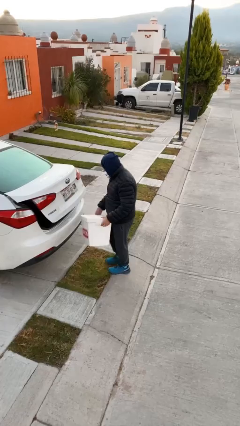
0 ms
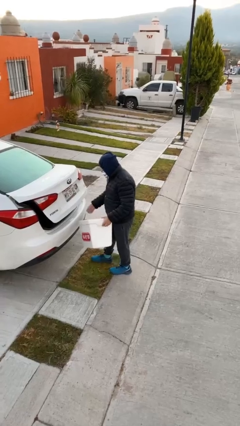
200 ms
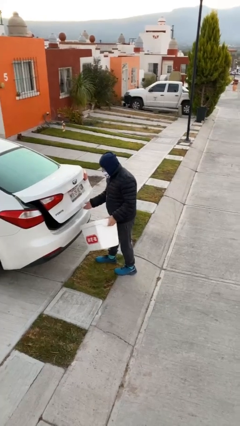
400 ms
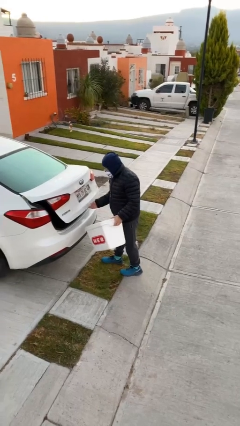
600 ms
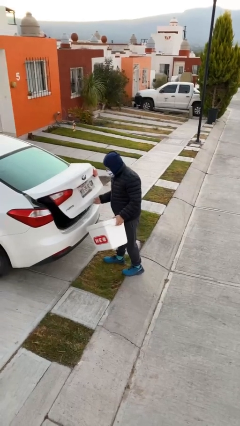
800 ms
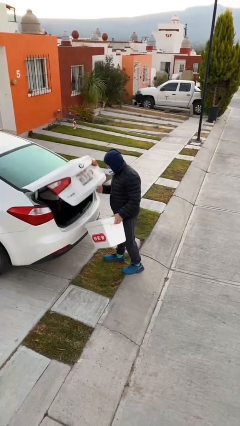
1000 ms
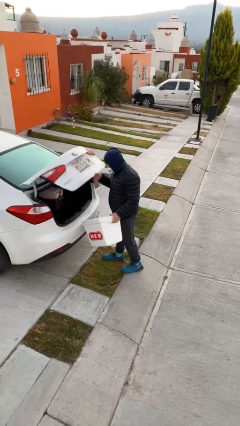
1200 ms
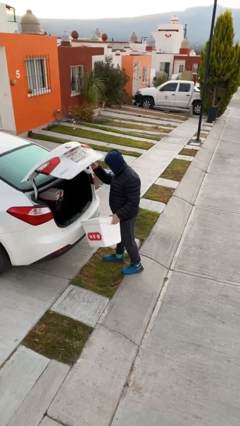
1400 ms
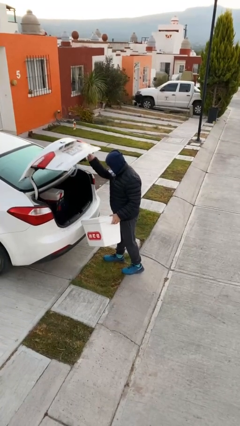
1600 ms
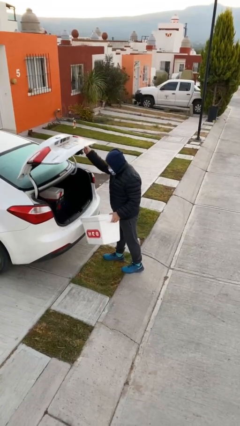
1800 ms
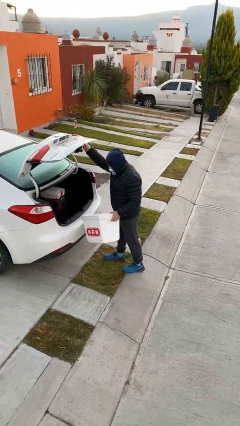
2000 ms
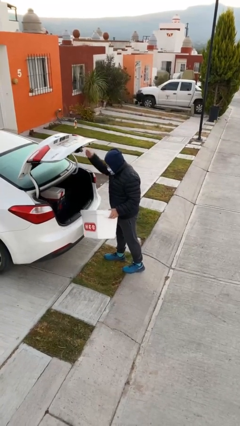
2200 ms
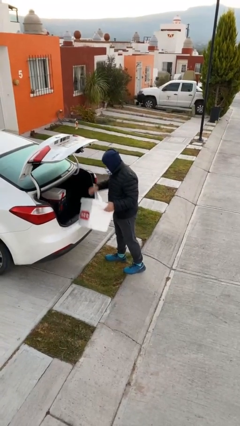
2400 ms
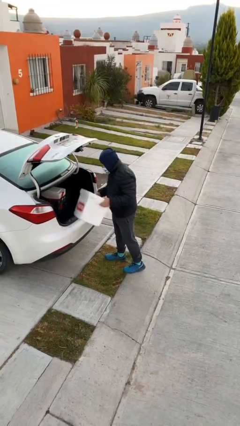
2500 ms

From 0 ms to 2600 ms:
person opens car trunk

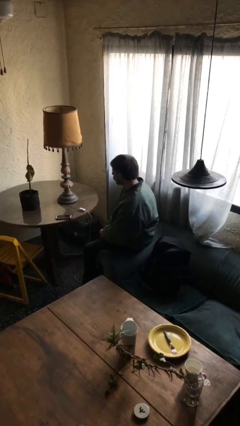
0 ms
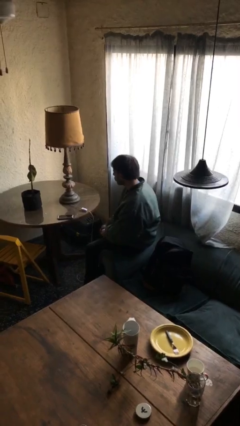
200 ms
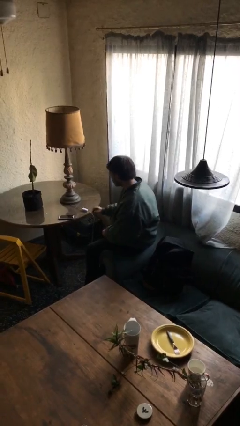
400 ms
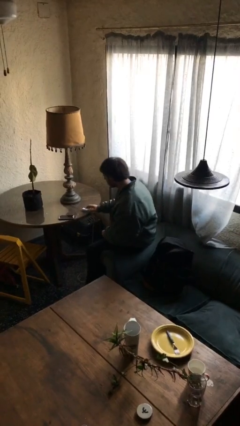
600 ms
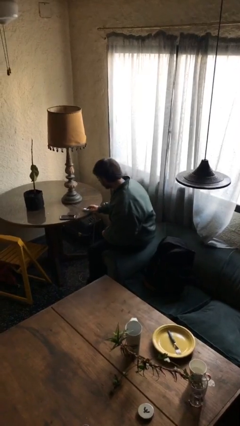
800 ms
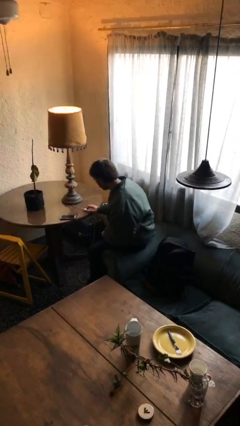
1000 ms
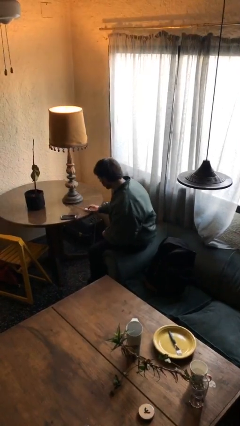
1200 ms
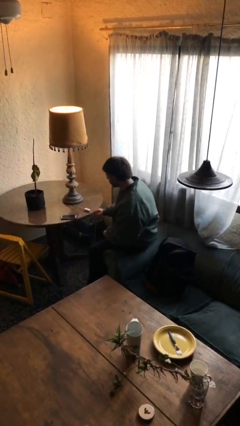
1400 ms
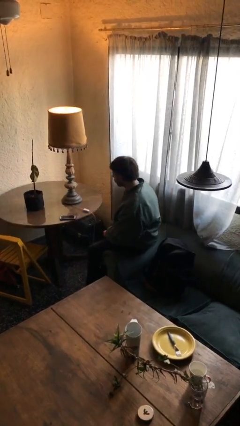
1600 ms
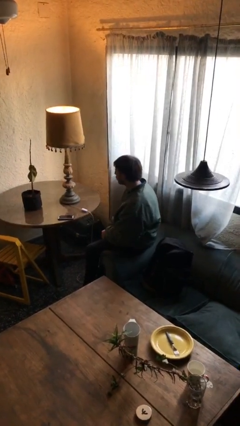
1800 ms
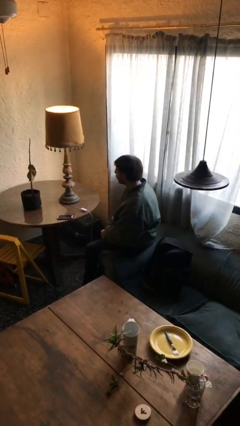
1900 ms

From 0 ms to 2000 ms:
person turns on lamp

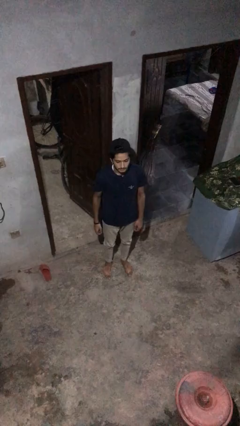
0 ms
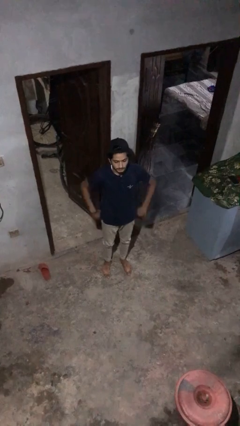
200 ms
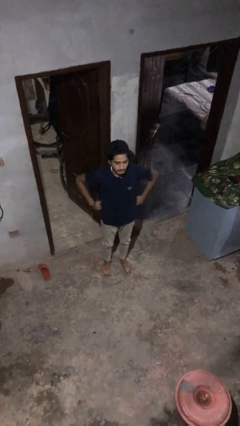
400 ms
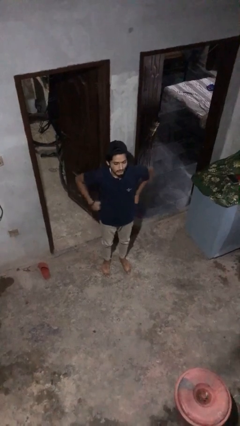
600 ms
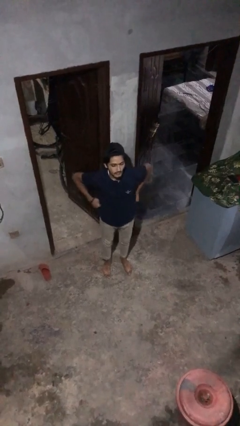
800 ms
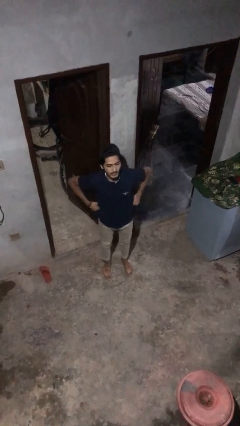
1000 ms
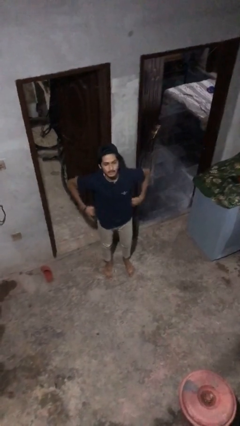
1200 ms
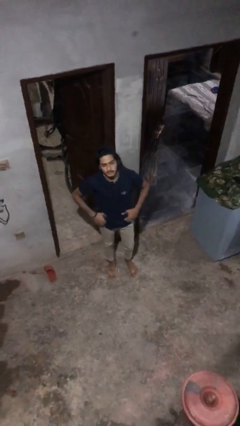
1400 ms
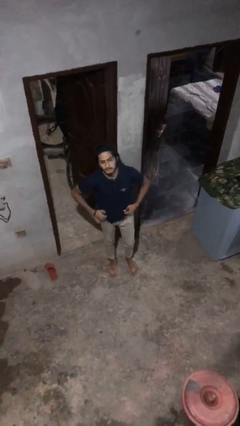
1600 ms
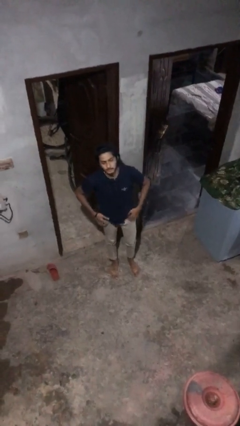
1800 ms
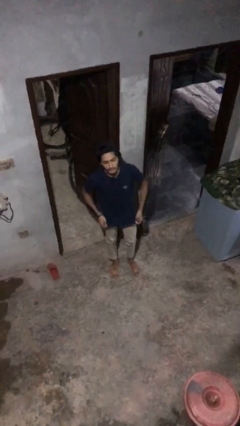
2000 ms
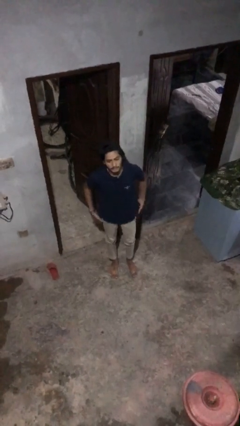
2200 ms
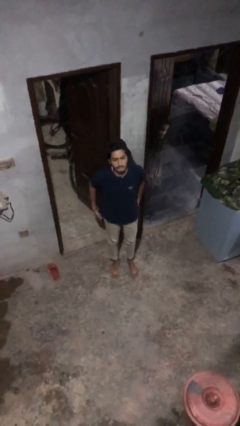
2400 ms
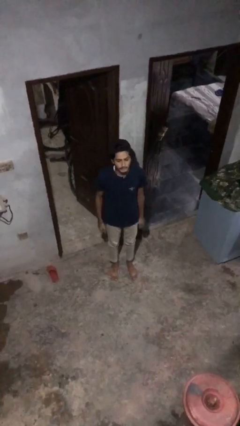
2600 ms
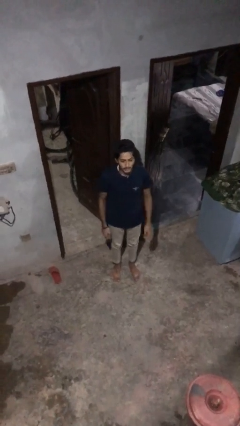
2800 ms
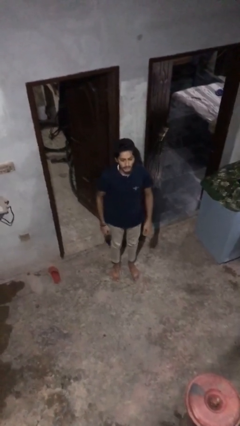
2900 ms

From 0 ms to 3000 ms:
person hikes up pants

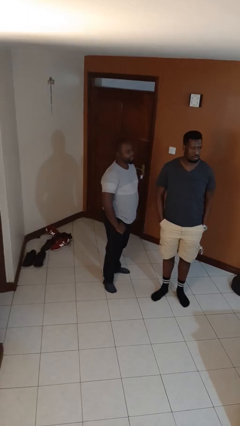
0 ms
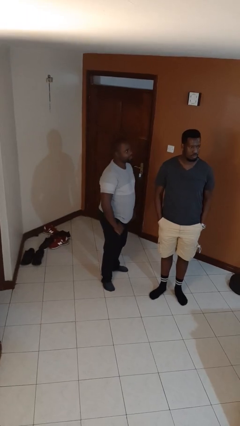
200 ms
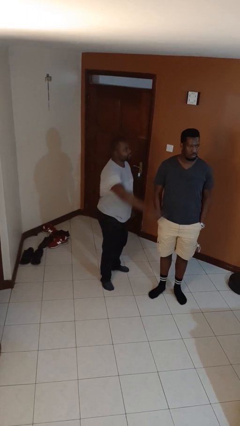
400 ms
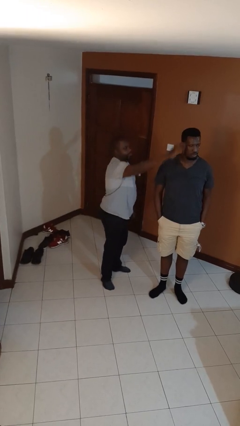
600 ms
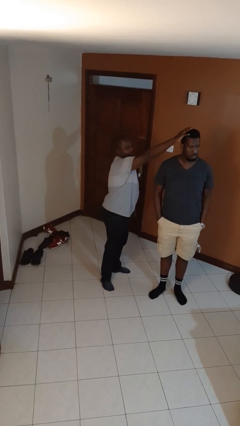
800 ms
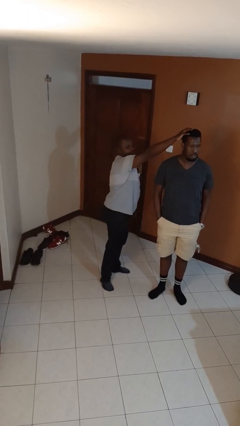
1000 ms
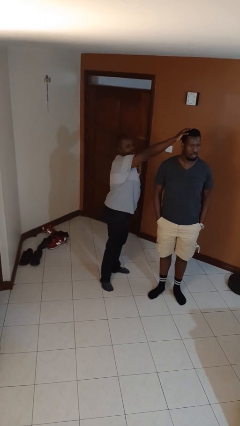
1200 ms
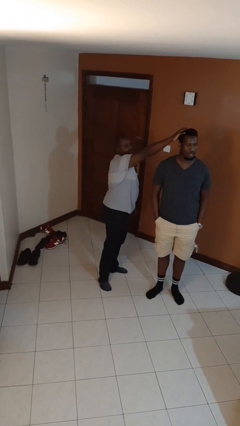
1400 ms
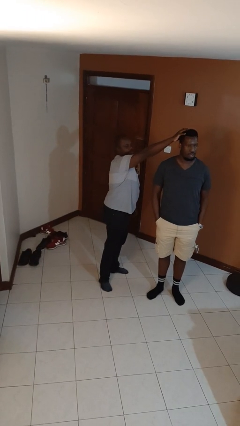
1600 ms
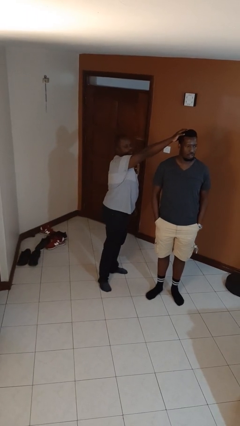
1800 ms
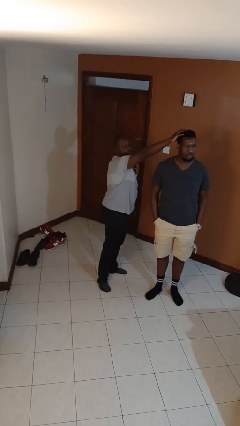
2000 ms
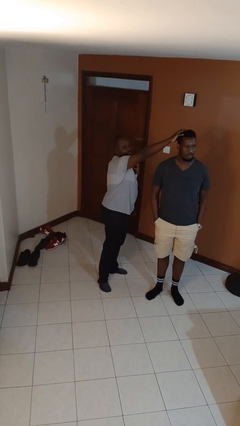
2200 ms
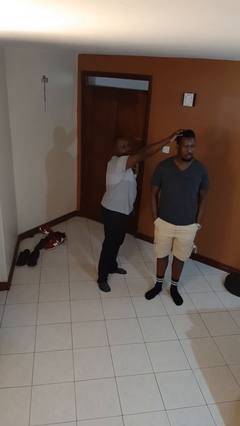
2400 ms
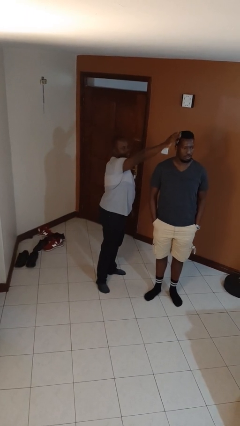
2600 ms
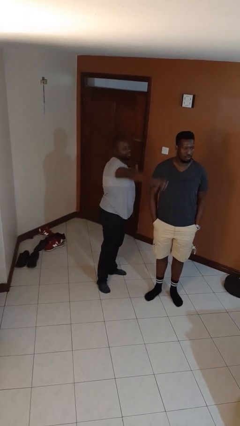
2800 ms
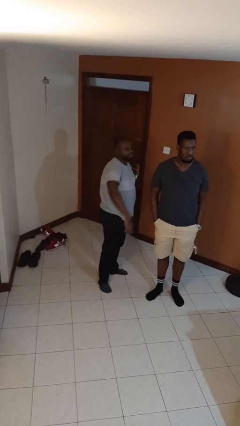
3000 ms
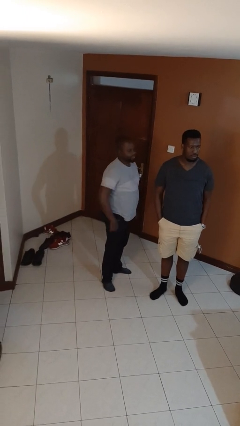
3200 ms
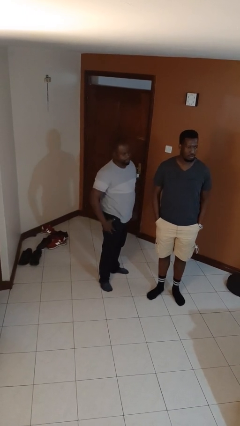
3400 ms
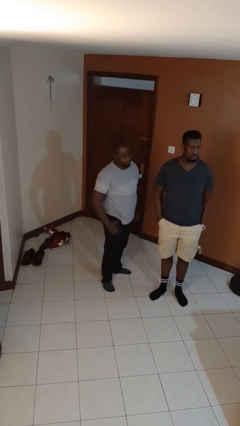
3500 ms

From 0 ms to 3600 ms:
person grabs person by hair

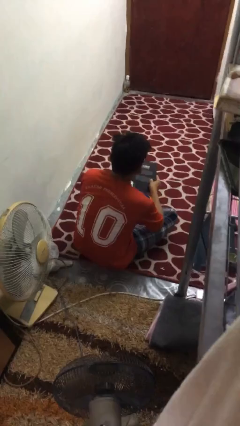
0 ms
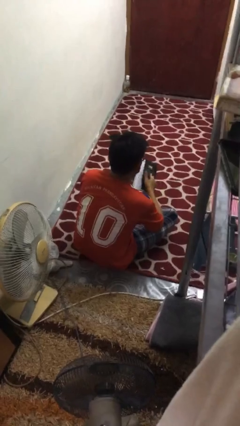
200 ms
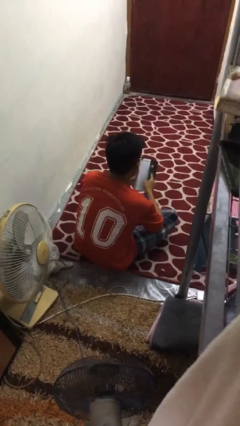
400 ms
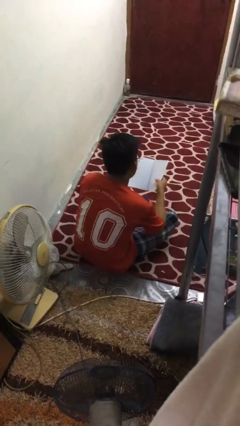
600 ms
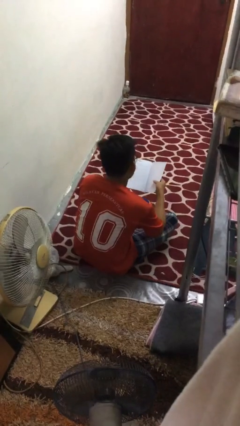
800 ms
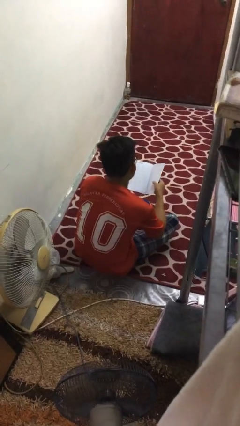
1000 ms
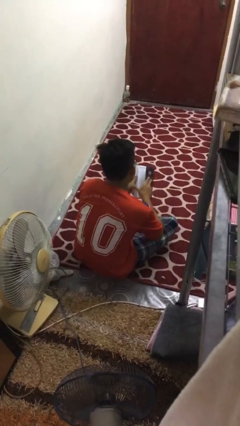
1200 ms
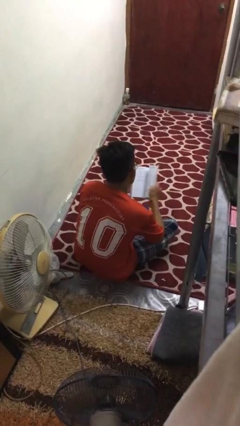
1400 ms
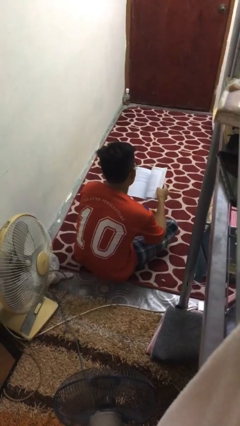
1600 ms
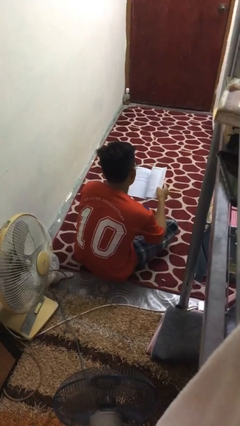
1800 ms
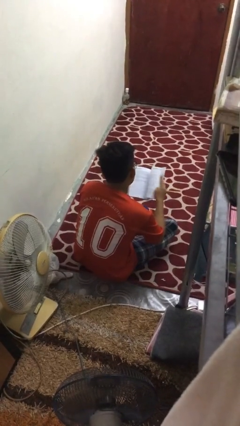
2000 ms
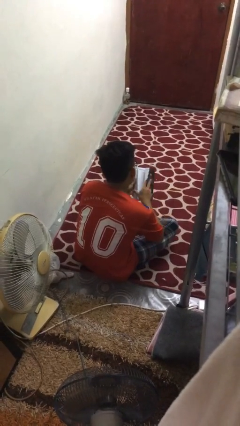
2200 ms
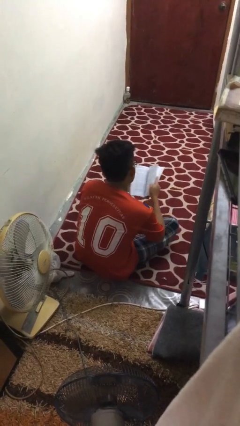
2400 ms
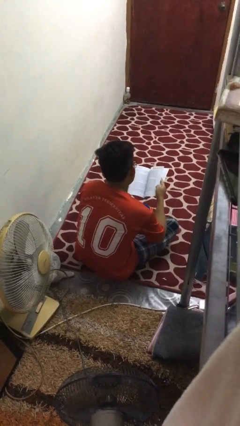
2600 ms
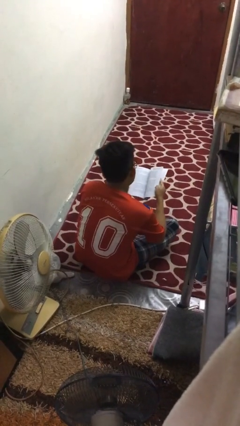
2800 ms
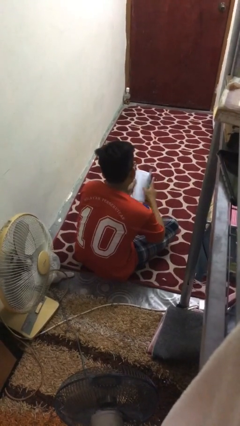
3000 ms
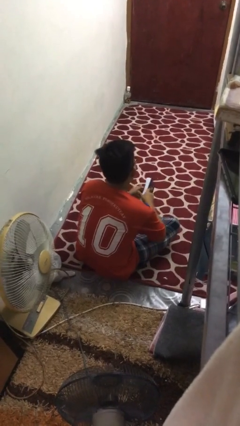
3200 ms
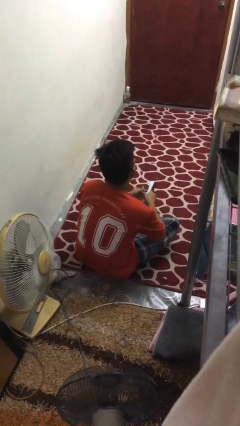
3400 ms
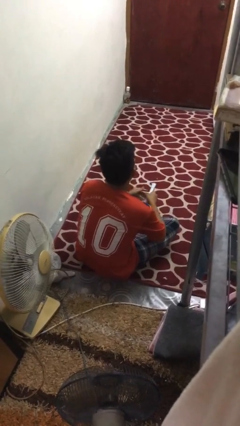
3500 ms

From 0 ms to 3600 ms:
person reads book

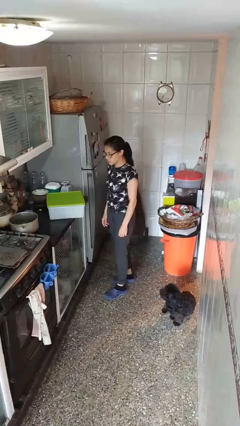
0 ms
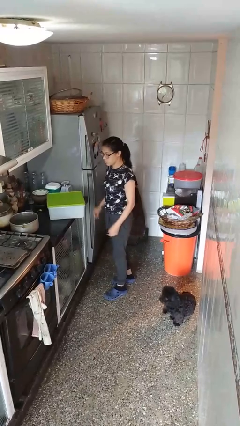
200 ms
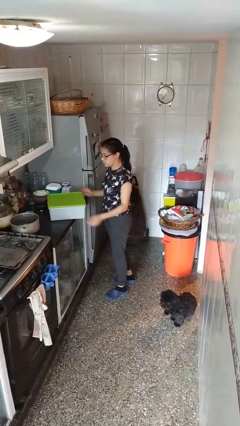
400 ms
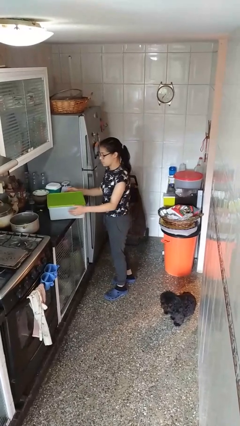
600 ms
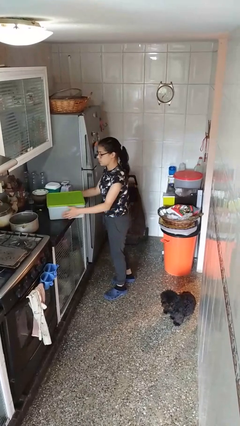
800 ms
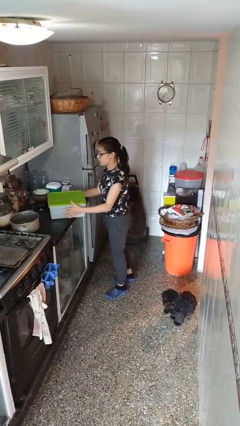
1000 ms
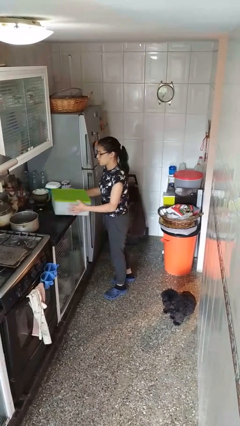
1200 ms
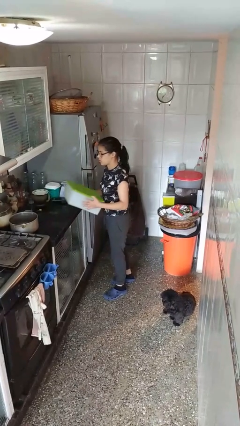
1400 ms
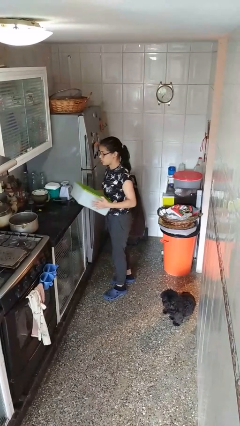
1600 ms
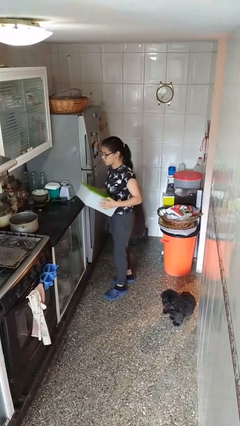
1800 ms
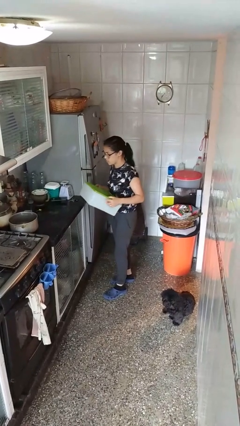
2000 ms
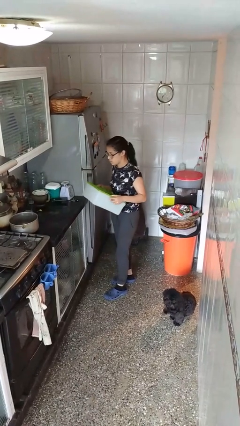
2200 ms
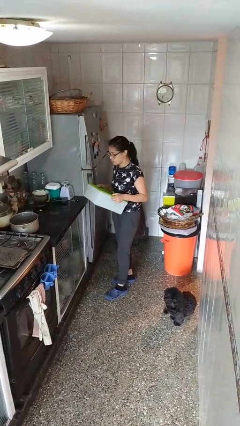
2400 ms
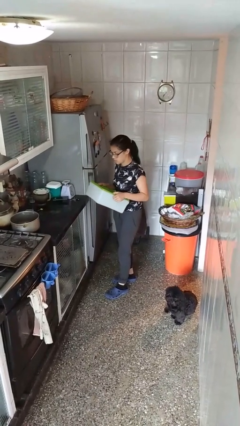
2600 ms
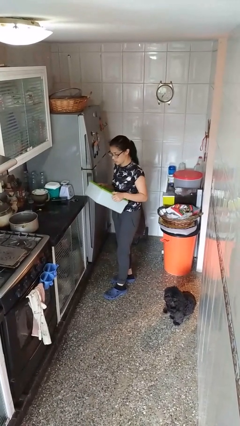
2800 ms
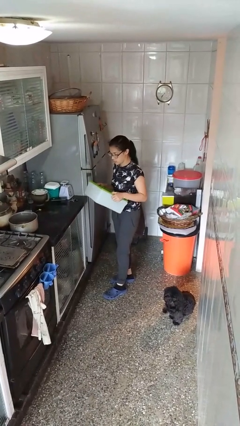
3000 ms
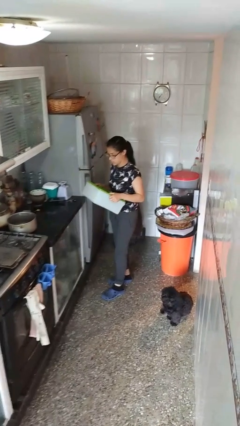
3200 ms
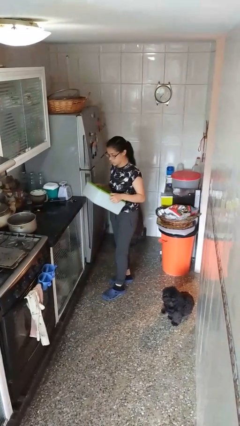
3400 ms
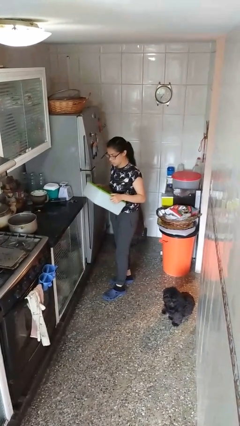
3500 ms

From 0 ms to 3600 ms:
person picks up object from countertop
